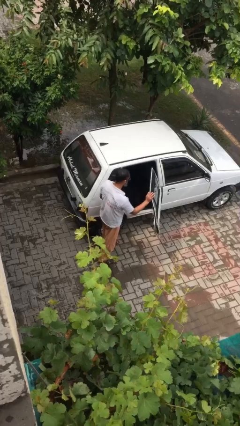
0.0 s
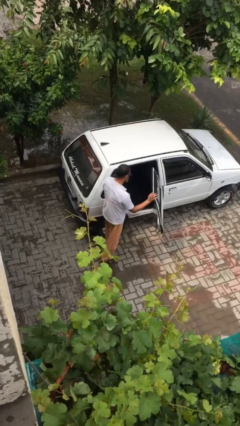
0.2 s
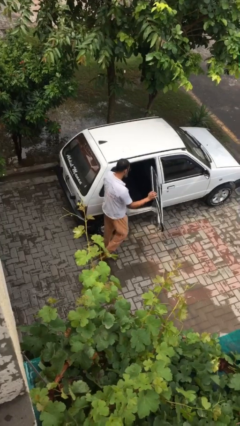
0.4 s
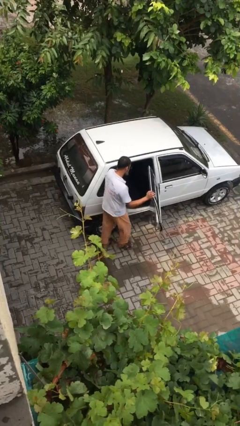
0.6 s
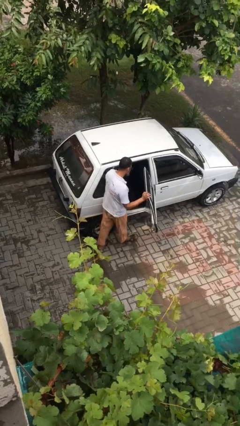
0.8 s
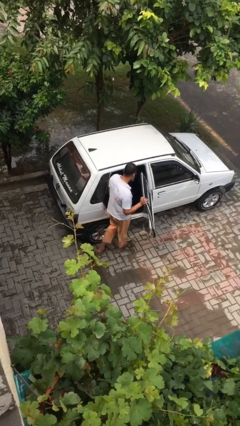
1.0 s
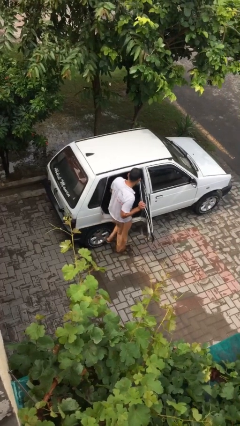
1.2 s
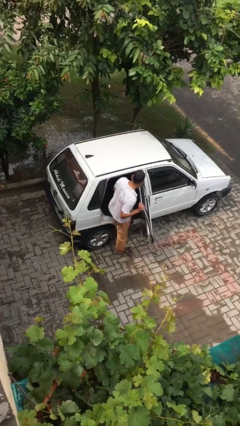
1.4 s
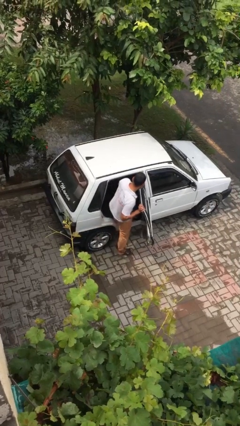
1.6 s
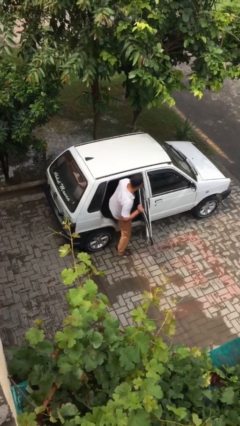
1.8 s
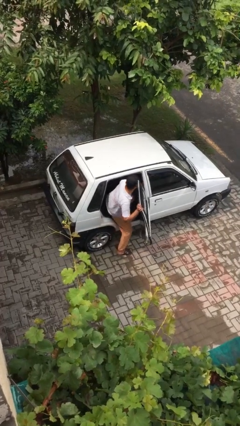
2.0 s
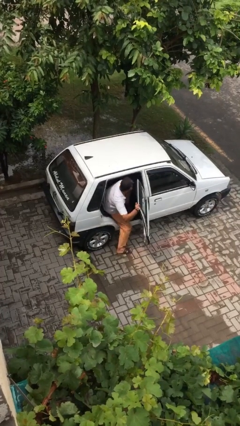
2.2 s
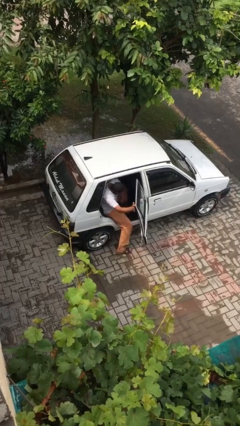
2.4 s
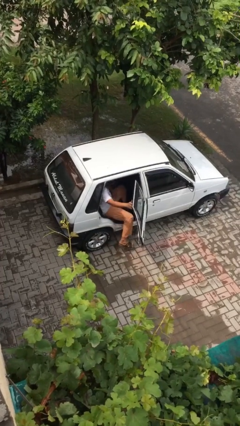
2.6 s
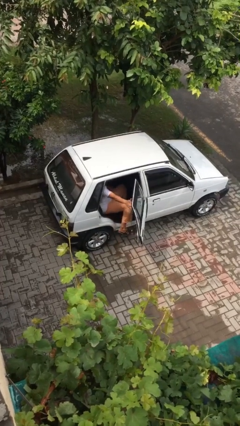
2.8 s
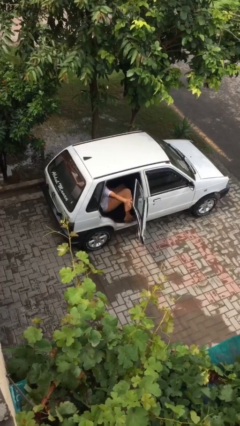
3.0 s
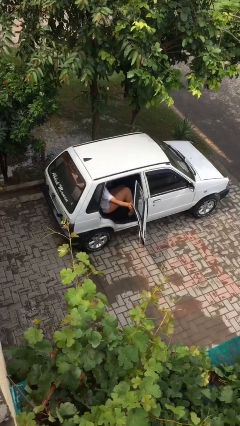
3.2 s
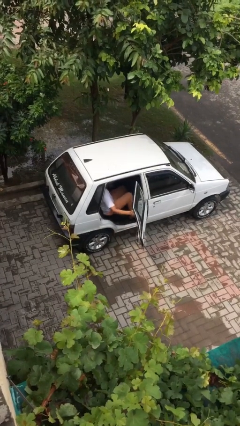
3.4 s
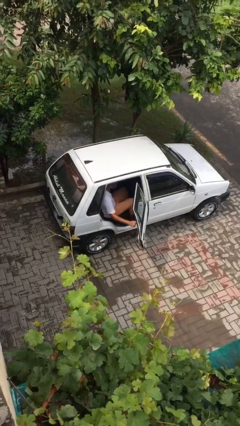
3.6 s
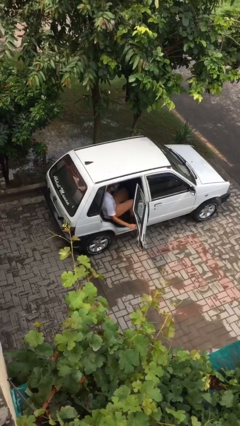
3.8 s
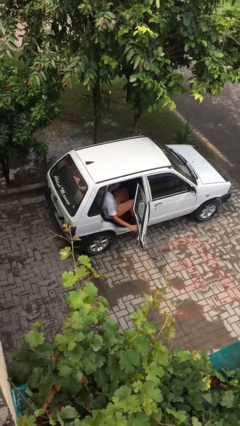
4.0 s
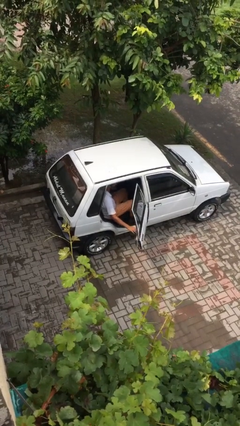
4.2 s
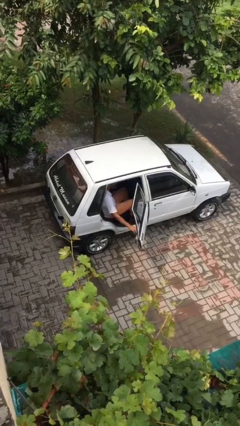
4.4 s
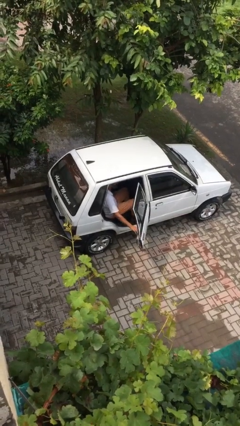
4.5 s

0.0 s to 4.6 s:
person enters car

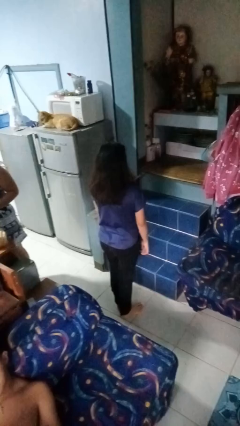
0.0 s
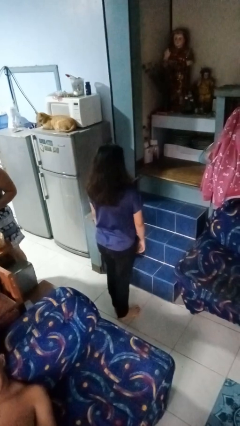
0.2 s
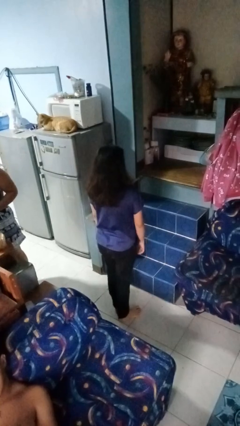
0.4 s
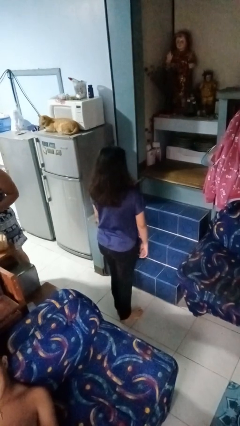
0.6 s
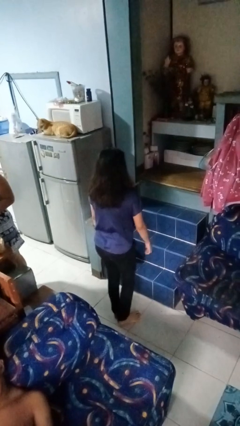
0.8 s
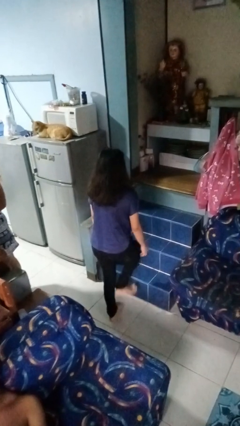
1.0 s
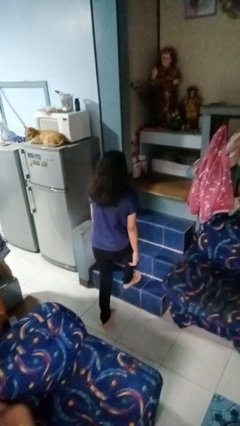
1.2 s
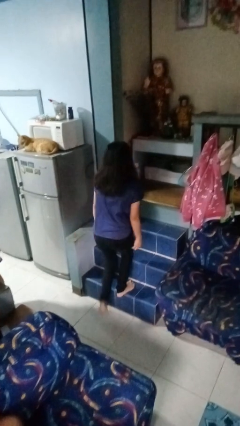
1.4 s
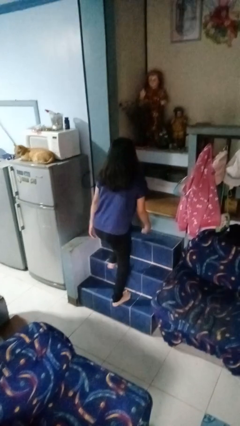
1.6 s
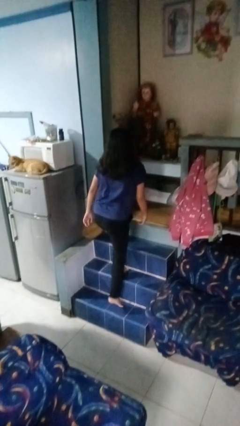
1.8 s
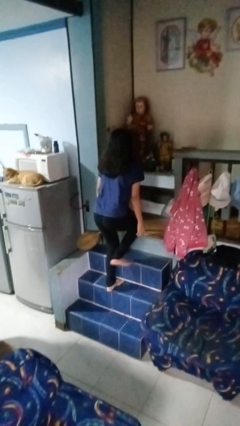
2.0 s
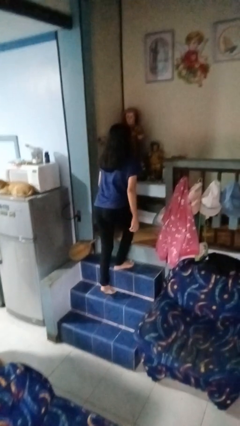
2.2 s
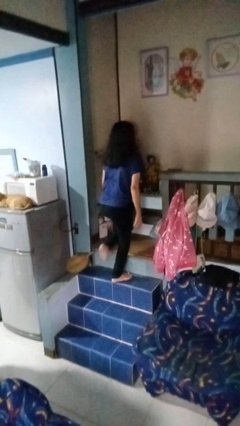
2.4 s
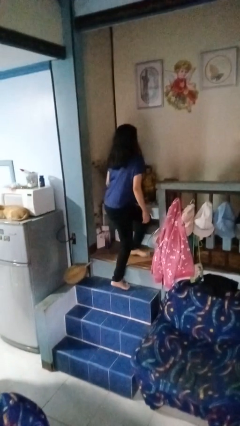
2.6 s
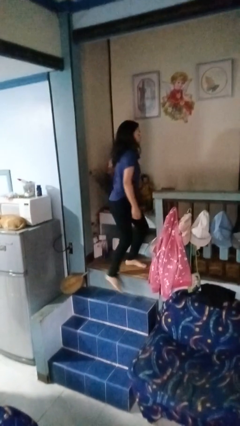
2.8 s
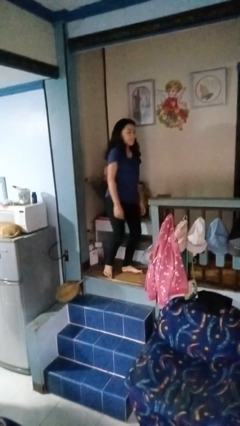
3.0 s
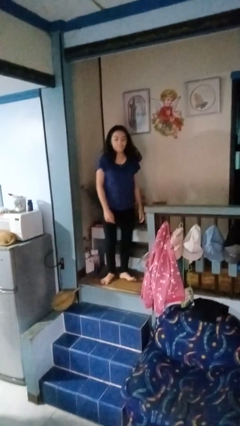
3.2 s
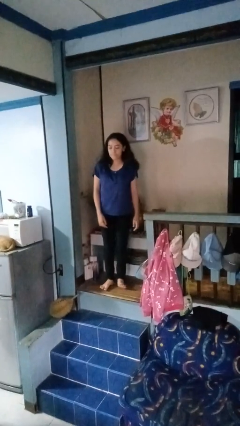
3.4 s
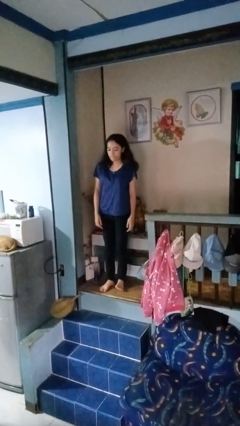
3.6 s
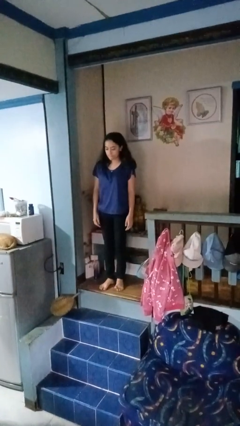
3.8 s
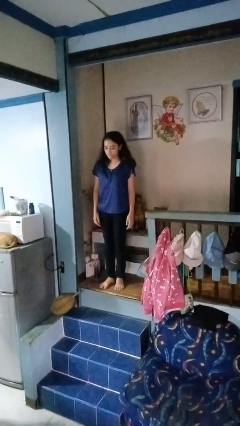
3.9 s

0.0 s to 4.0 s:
person climbs up stairs

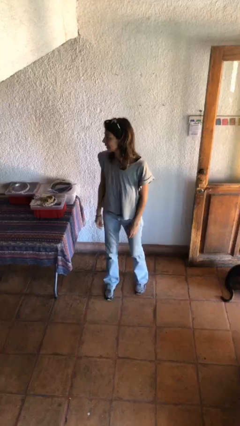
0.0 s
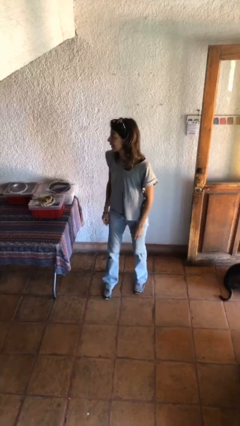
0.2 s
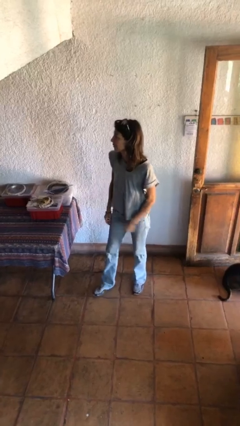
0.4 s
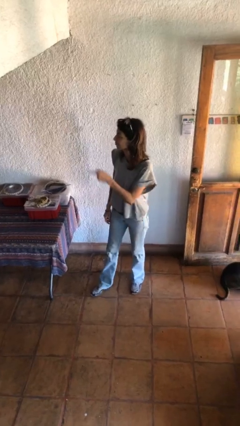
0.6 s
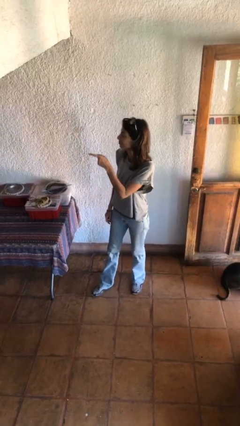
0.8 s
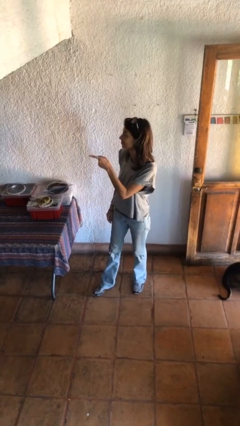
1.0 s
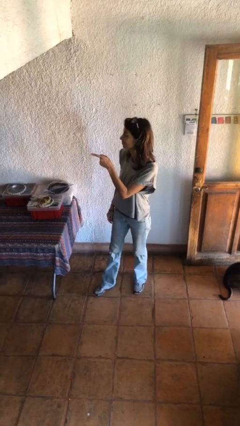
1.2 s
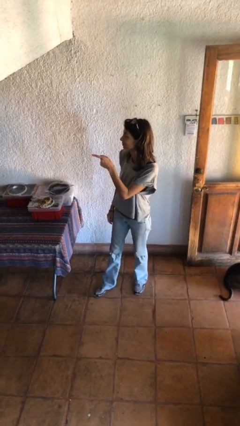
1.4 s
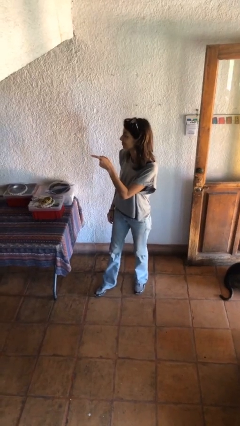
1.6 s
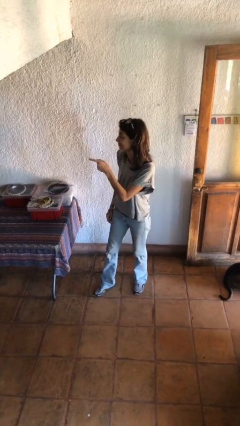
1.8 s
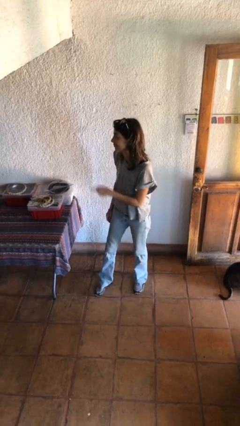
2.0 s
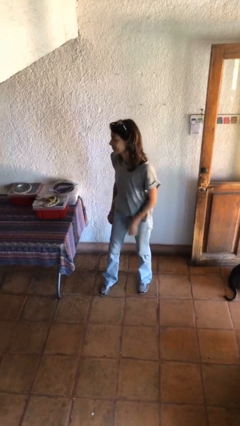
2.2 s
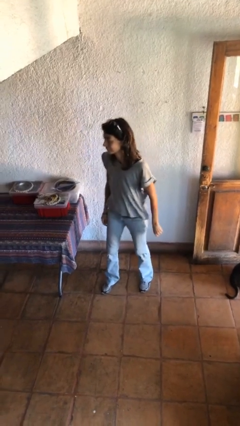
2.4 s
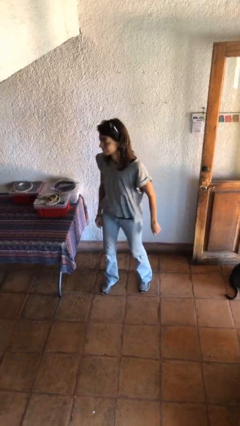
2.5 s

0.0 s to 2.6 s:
person points at person

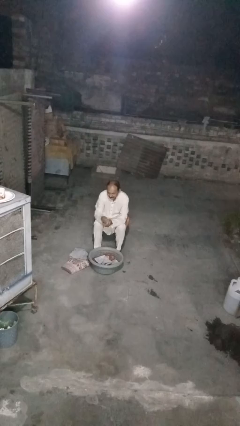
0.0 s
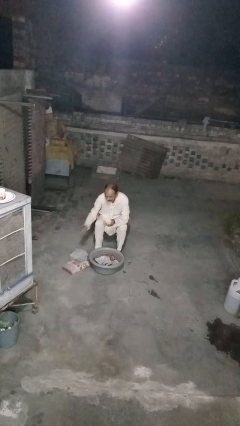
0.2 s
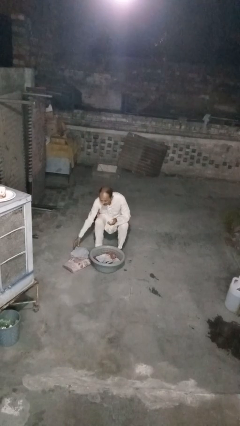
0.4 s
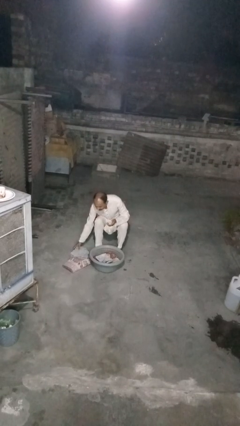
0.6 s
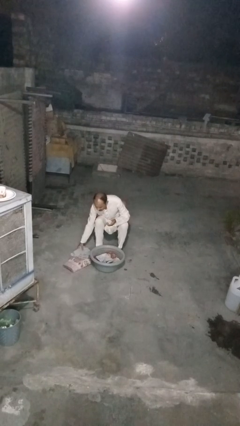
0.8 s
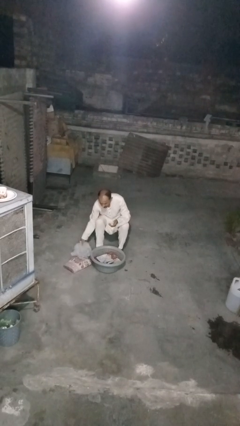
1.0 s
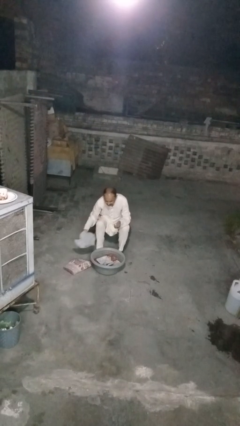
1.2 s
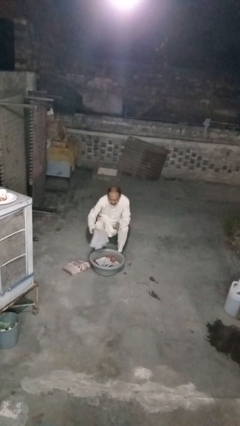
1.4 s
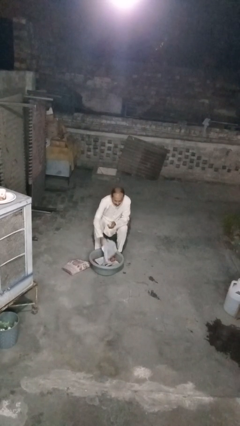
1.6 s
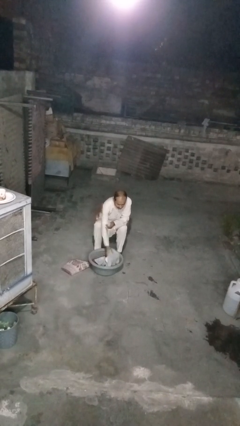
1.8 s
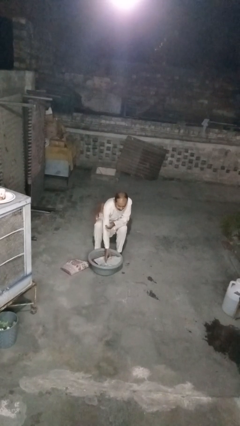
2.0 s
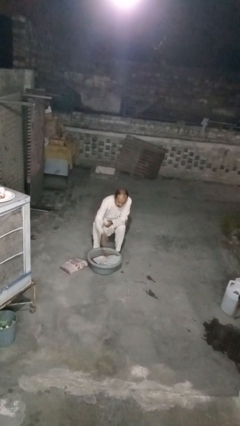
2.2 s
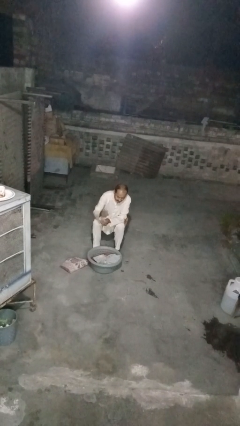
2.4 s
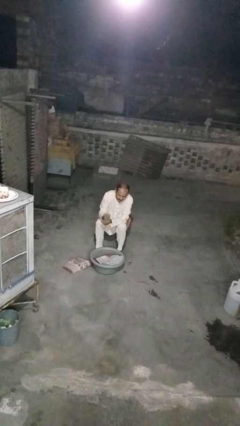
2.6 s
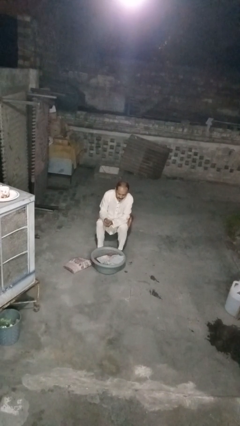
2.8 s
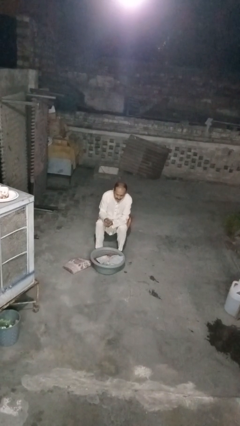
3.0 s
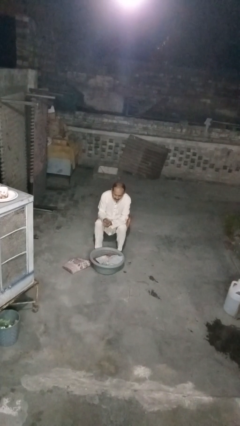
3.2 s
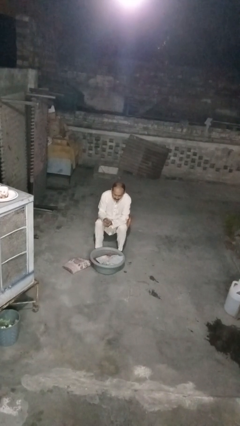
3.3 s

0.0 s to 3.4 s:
person puts object into basket

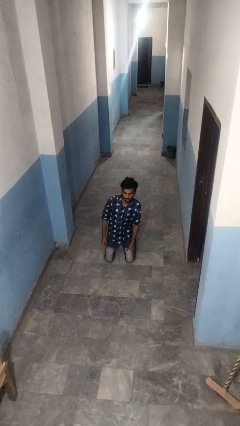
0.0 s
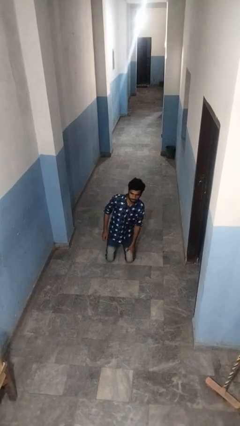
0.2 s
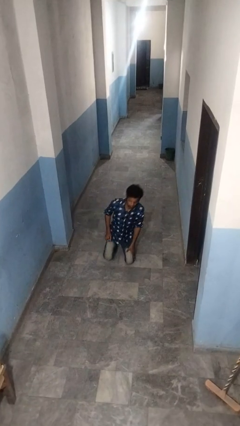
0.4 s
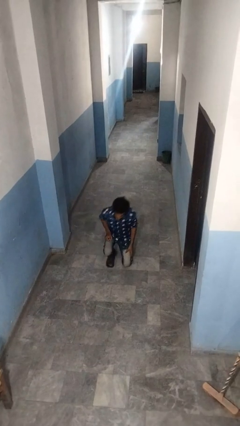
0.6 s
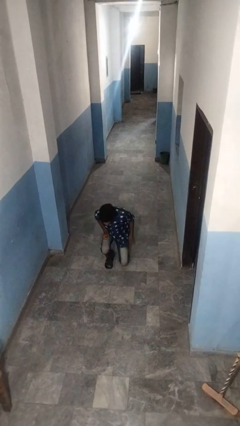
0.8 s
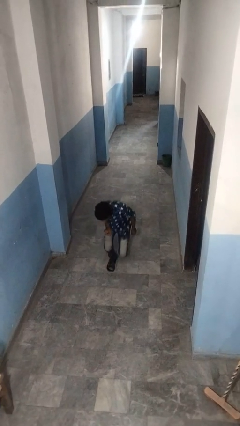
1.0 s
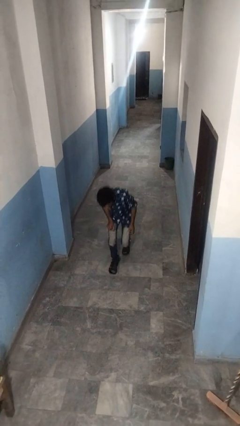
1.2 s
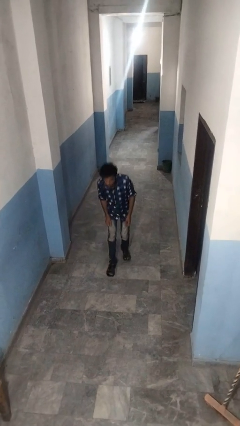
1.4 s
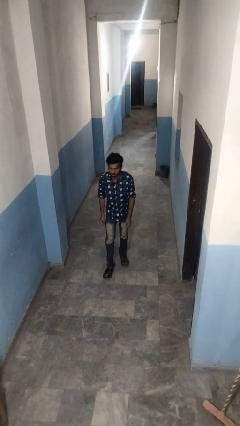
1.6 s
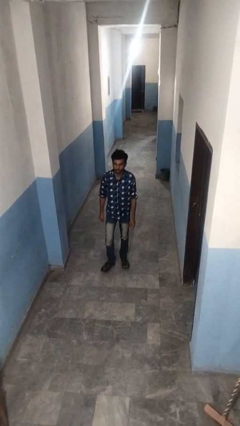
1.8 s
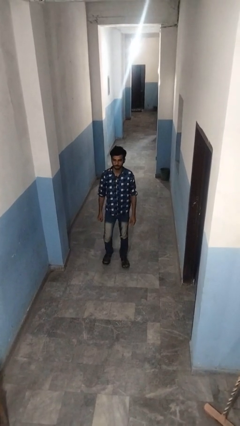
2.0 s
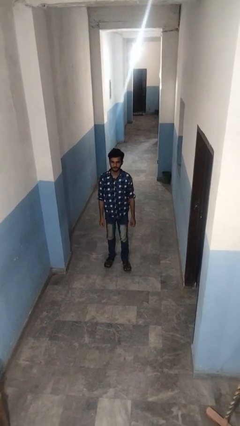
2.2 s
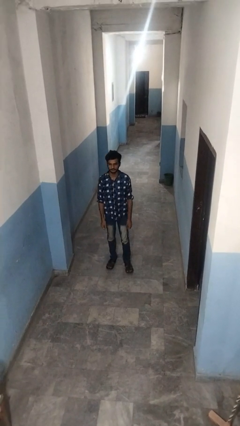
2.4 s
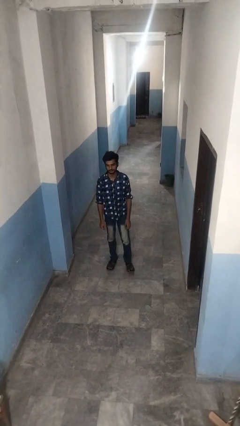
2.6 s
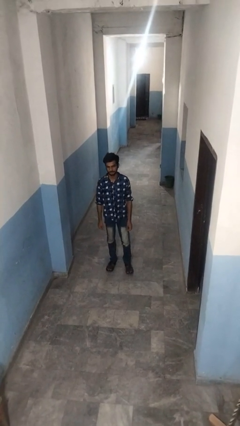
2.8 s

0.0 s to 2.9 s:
person stands up from floor

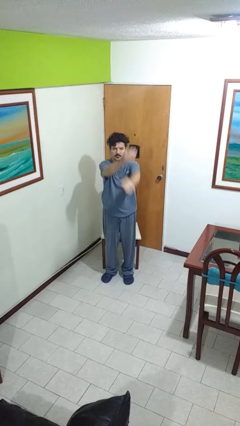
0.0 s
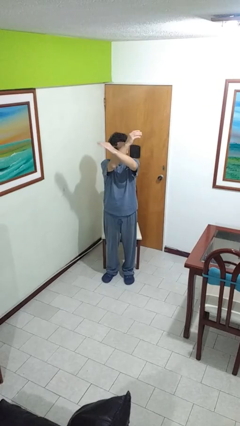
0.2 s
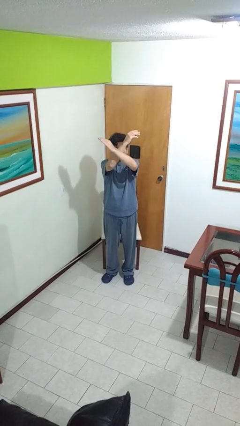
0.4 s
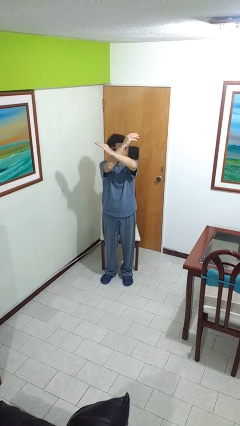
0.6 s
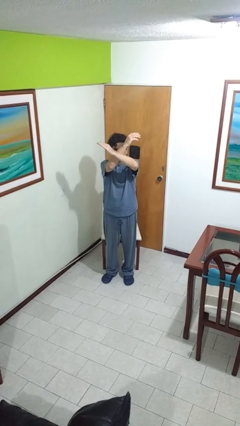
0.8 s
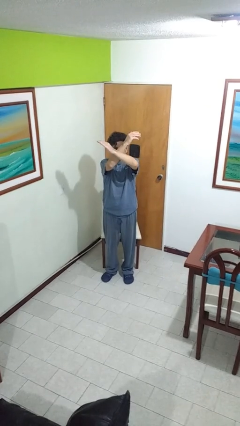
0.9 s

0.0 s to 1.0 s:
person gestures arms x
